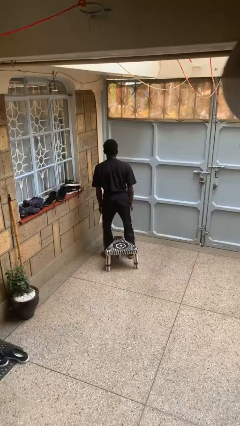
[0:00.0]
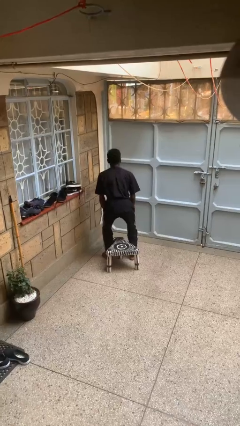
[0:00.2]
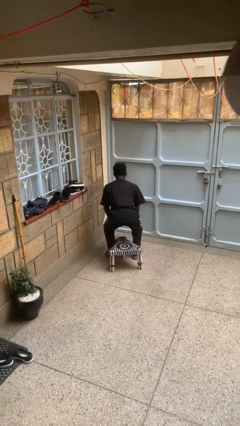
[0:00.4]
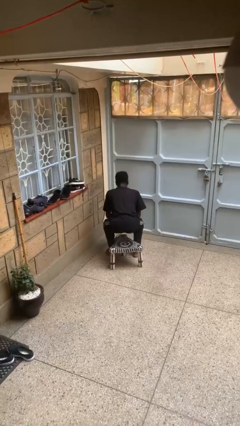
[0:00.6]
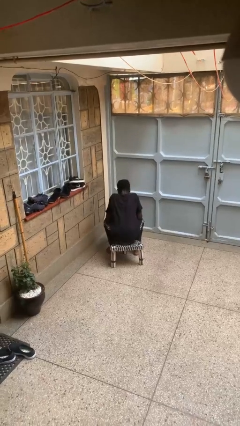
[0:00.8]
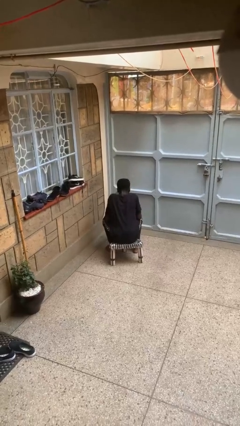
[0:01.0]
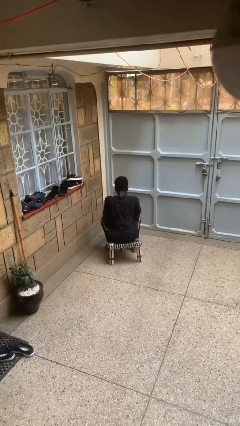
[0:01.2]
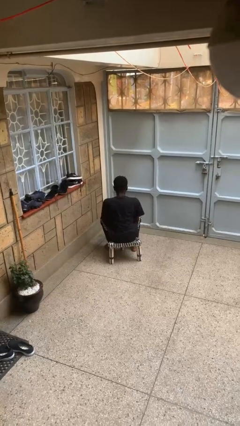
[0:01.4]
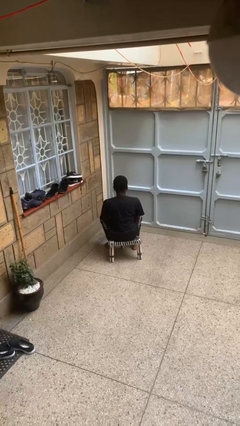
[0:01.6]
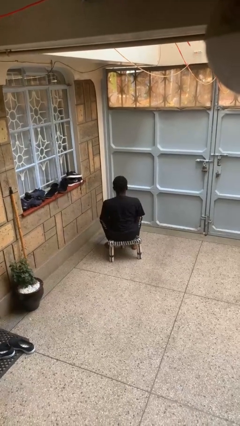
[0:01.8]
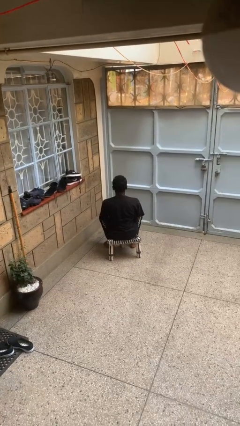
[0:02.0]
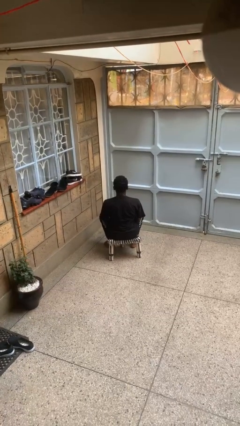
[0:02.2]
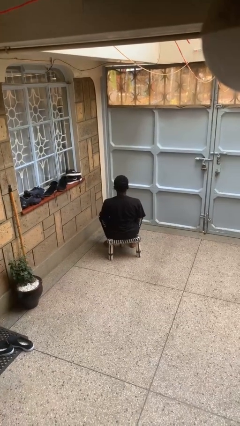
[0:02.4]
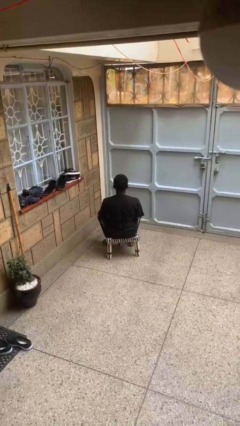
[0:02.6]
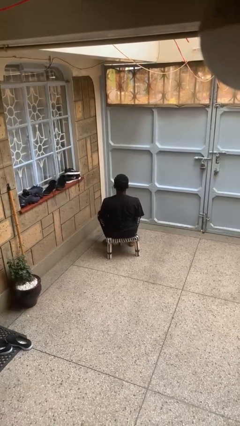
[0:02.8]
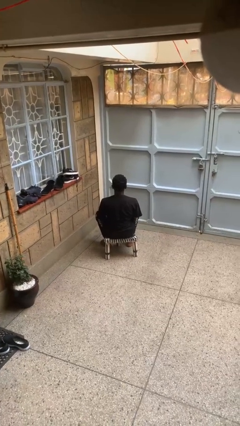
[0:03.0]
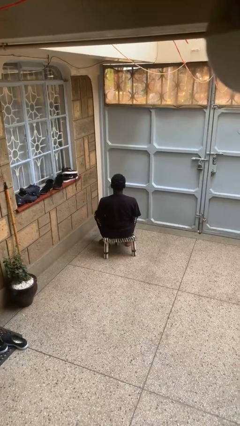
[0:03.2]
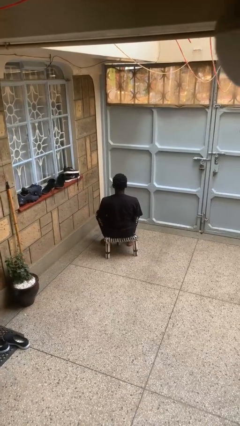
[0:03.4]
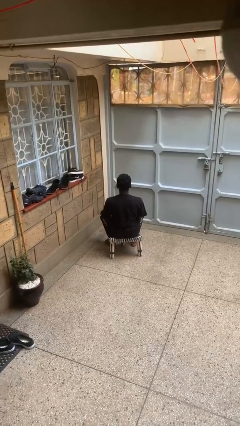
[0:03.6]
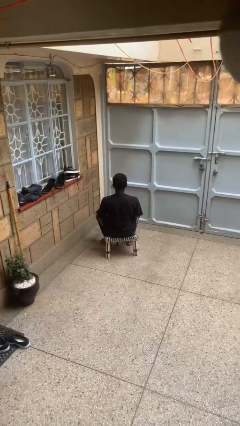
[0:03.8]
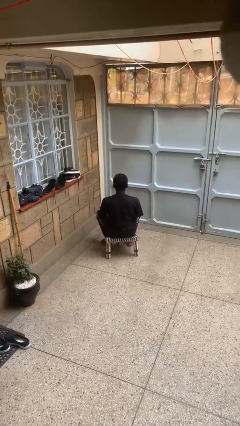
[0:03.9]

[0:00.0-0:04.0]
person sits down

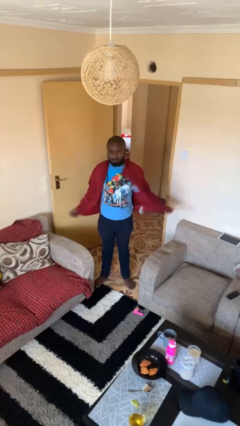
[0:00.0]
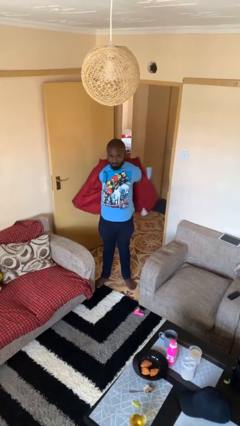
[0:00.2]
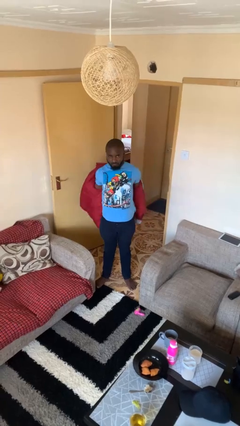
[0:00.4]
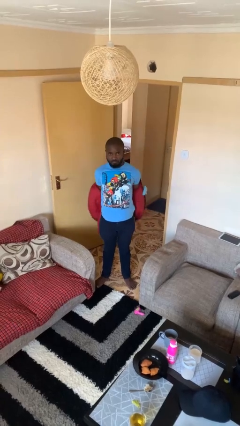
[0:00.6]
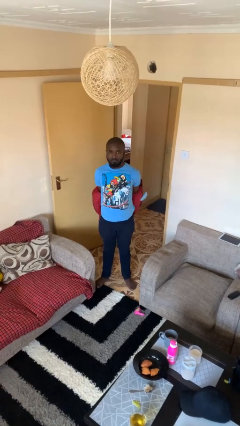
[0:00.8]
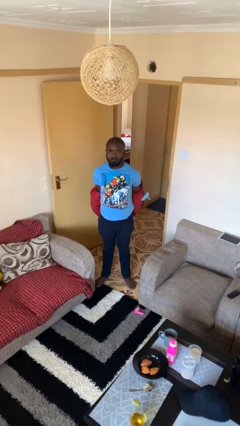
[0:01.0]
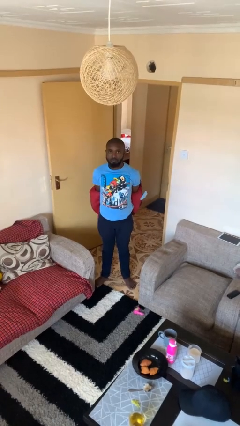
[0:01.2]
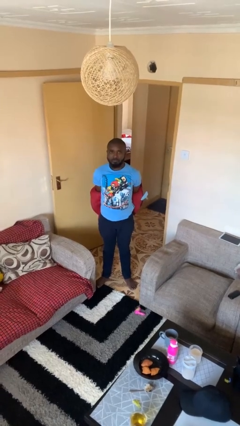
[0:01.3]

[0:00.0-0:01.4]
person takes off jacket

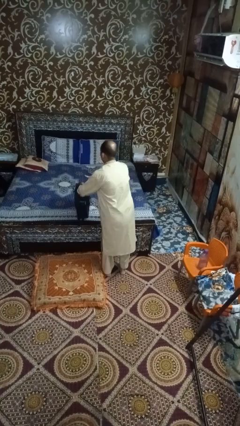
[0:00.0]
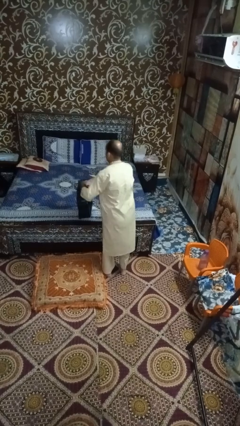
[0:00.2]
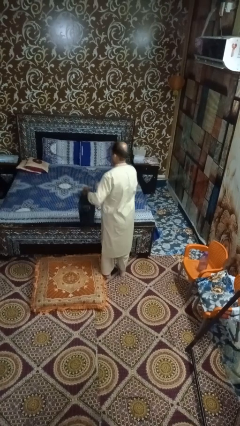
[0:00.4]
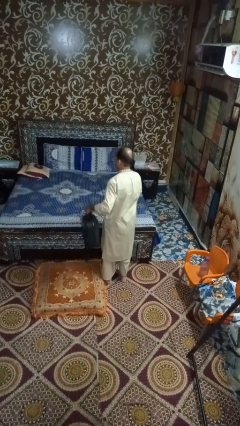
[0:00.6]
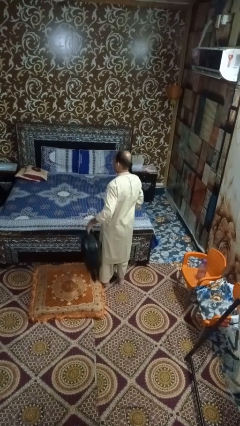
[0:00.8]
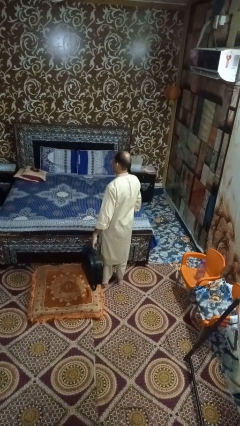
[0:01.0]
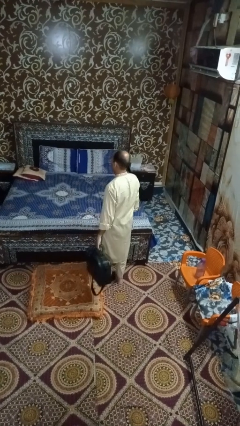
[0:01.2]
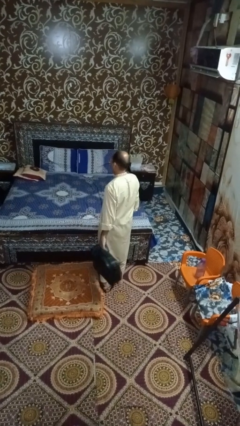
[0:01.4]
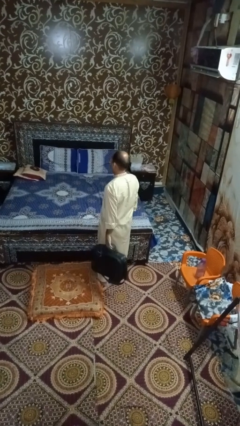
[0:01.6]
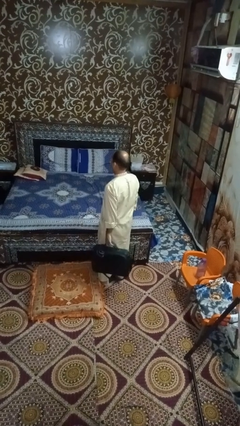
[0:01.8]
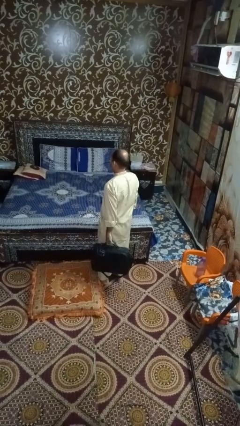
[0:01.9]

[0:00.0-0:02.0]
person puts down object on bed

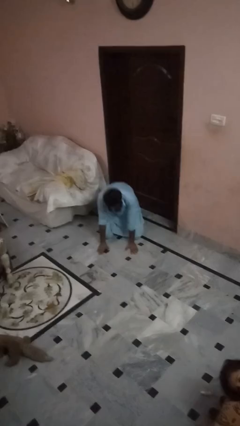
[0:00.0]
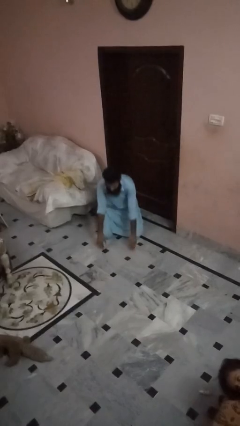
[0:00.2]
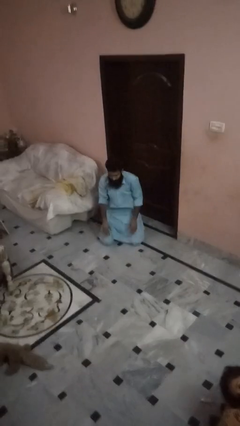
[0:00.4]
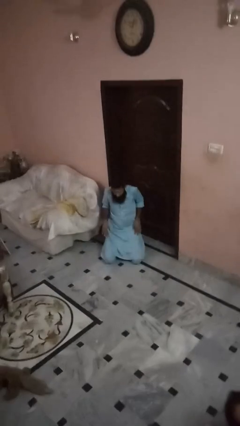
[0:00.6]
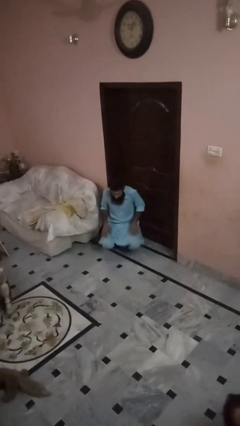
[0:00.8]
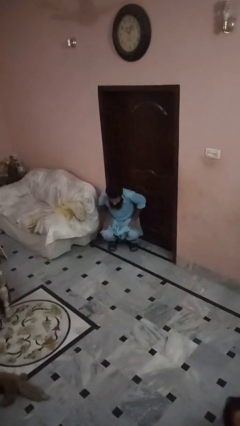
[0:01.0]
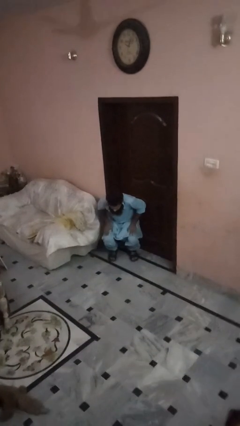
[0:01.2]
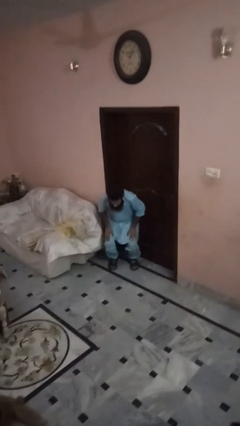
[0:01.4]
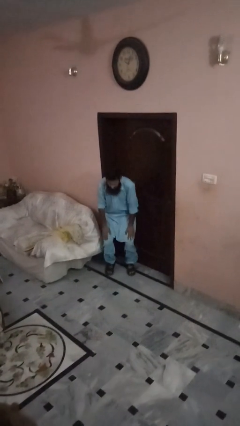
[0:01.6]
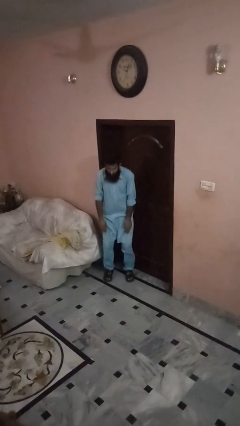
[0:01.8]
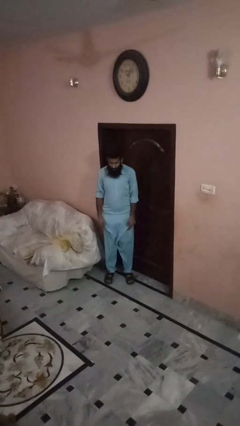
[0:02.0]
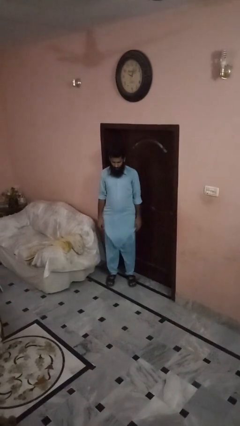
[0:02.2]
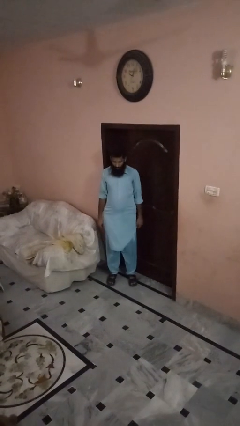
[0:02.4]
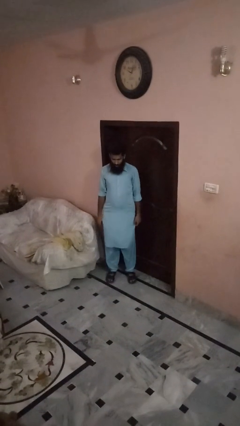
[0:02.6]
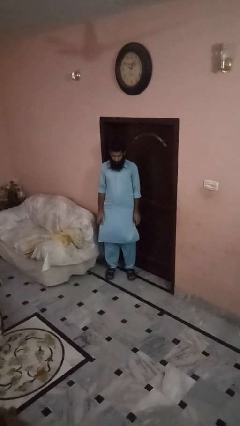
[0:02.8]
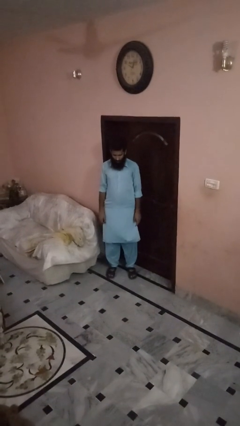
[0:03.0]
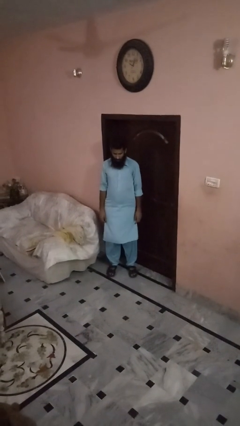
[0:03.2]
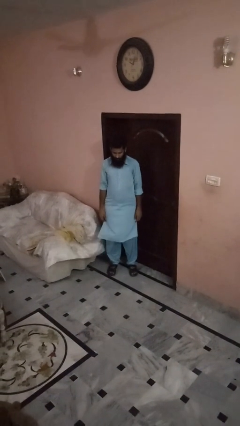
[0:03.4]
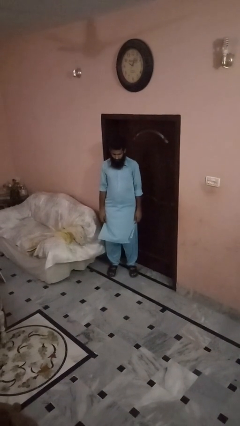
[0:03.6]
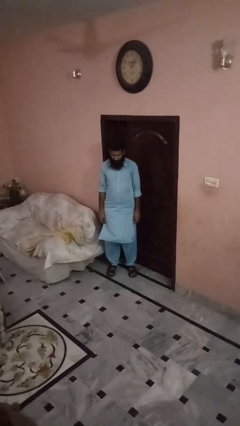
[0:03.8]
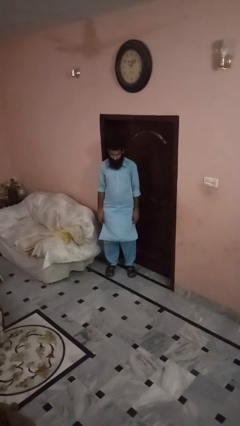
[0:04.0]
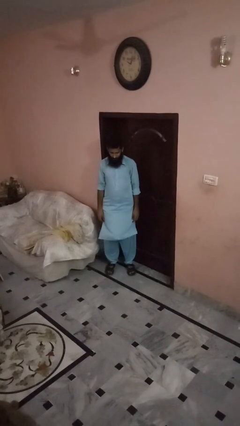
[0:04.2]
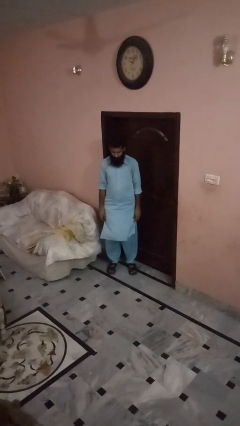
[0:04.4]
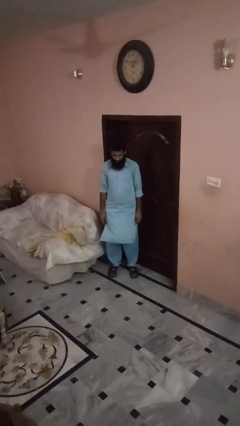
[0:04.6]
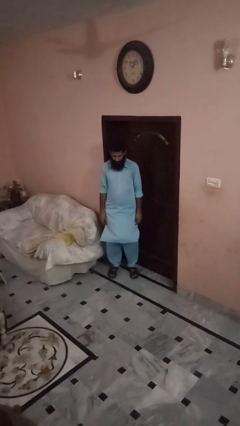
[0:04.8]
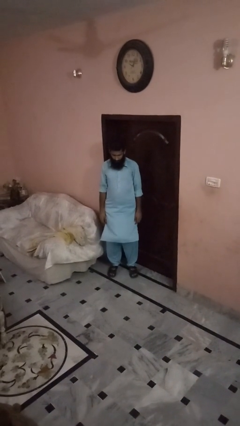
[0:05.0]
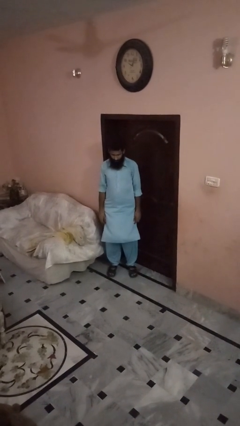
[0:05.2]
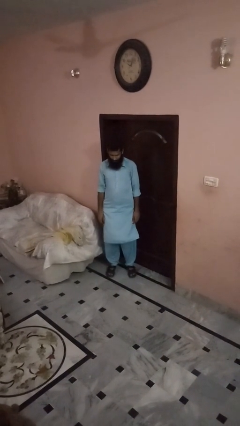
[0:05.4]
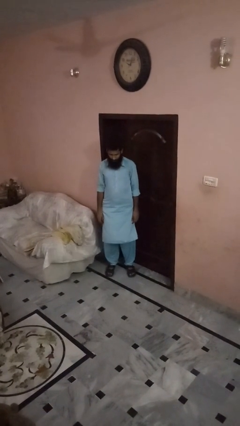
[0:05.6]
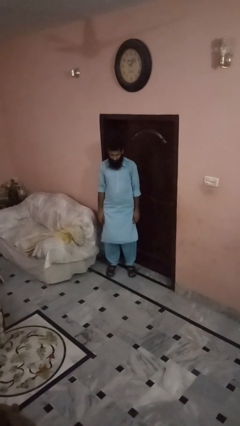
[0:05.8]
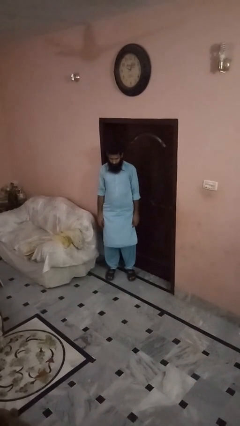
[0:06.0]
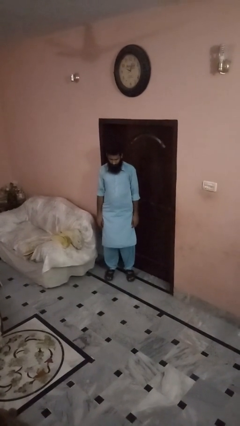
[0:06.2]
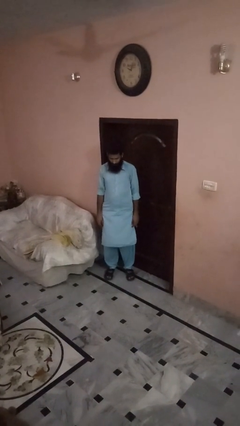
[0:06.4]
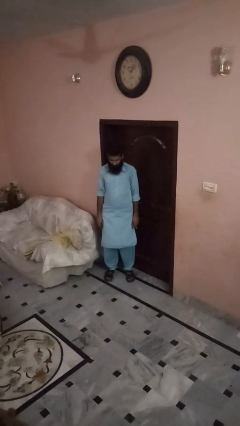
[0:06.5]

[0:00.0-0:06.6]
person stands up from floor

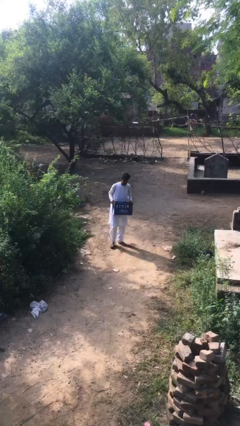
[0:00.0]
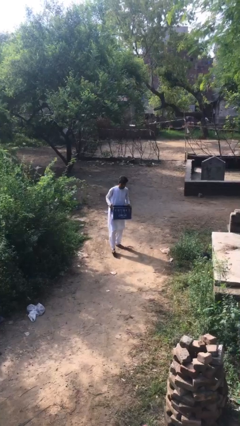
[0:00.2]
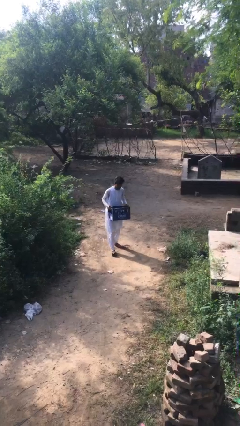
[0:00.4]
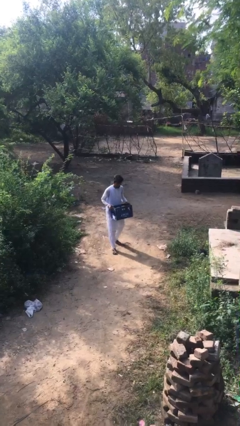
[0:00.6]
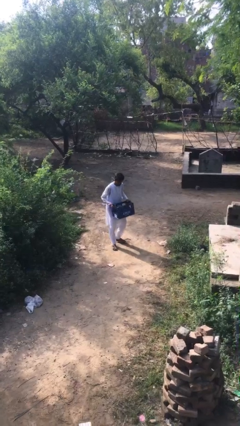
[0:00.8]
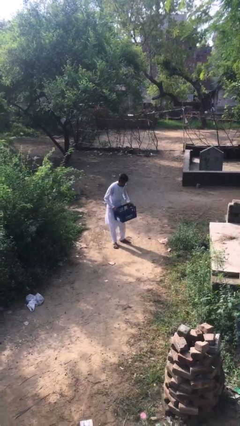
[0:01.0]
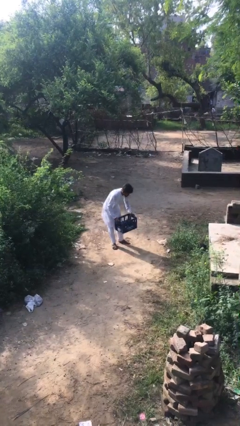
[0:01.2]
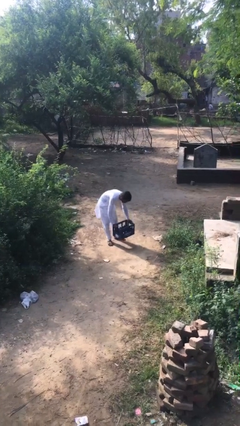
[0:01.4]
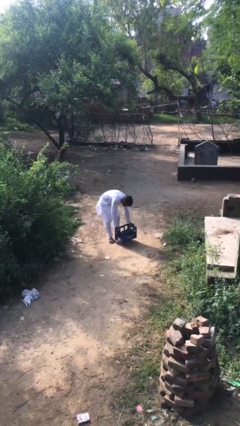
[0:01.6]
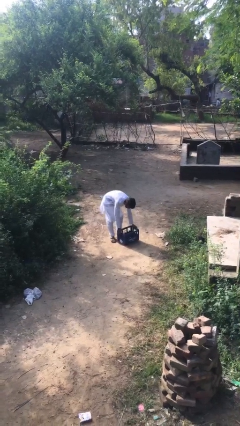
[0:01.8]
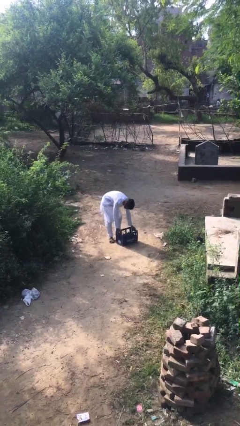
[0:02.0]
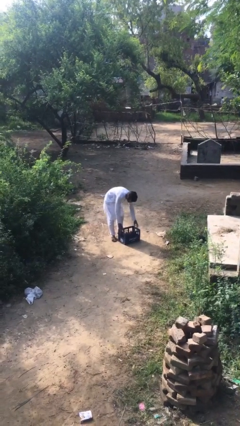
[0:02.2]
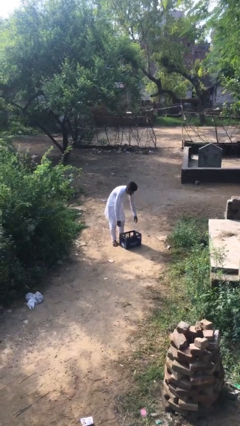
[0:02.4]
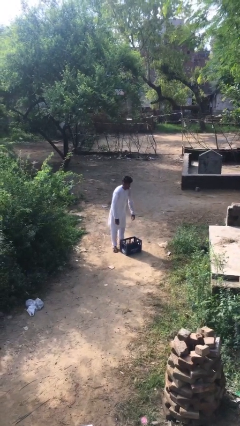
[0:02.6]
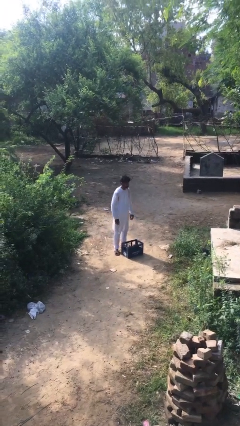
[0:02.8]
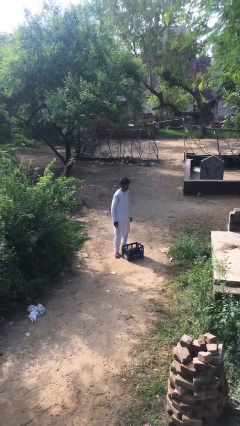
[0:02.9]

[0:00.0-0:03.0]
person puts down object on floor
